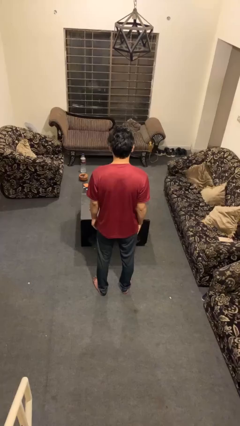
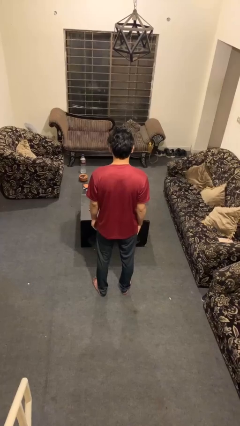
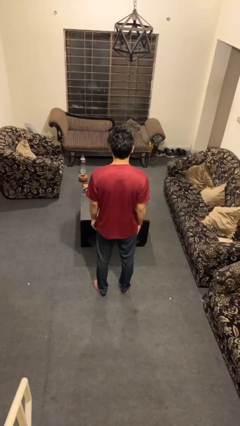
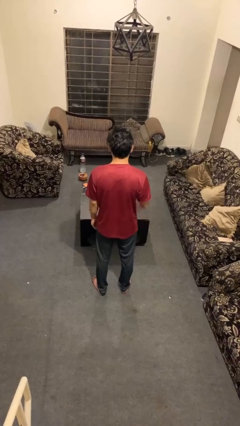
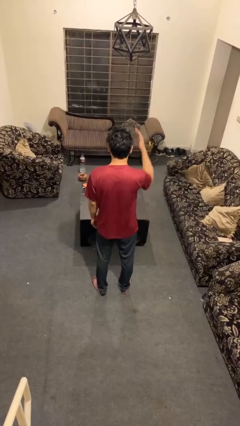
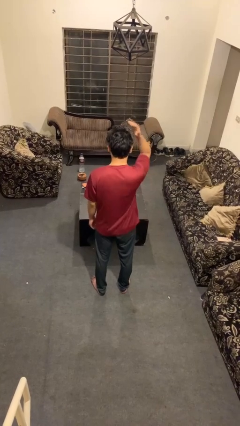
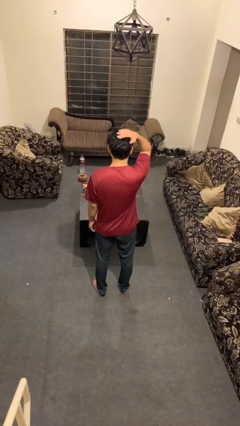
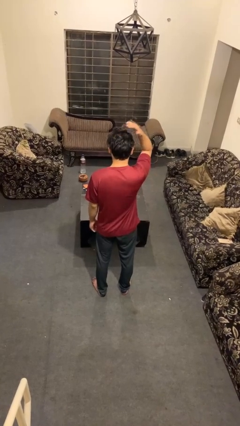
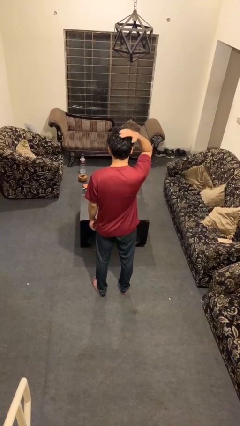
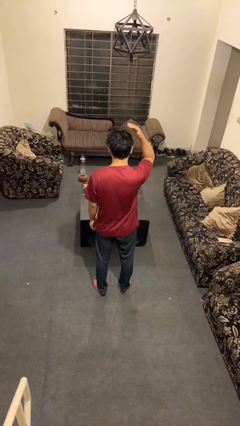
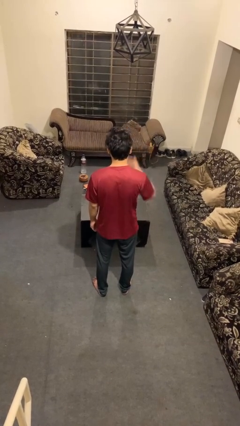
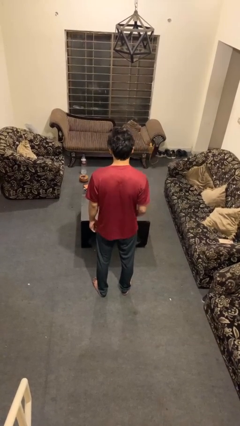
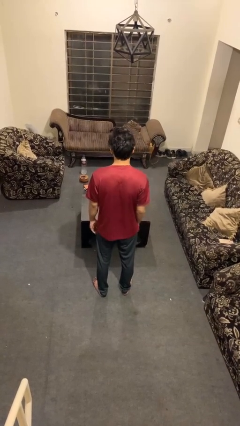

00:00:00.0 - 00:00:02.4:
person pats head

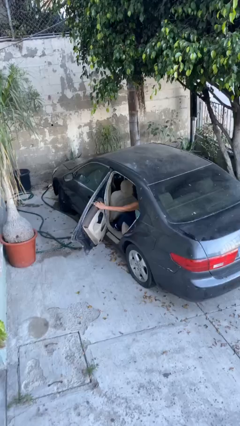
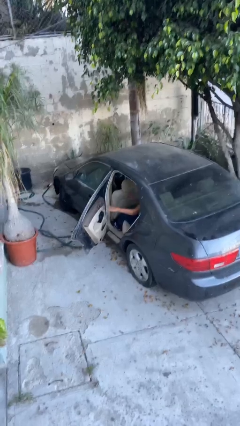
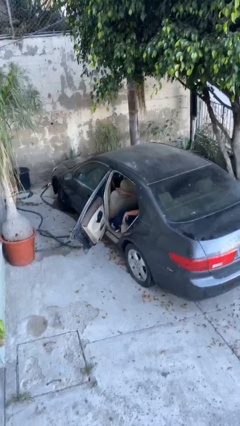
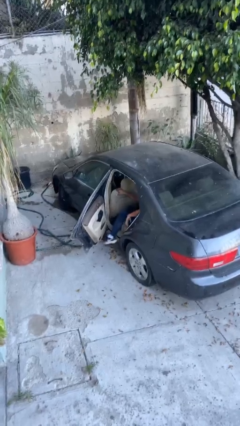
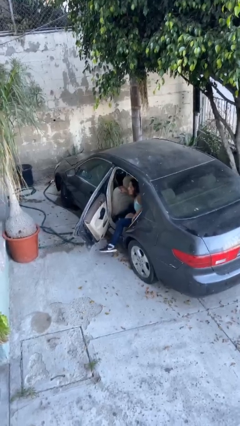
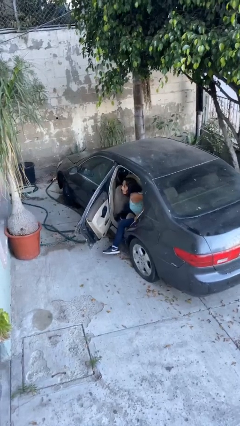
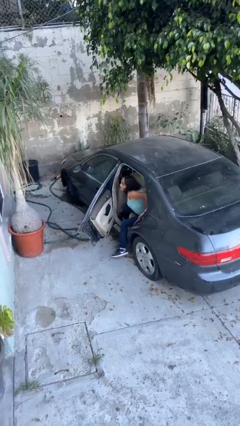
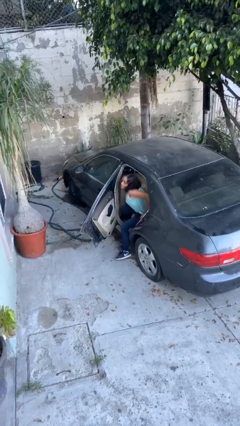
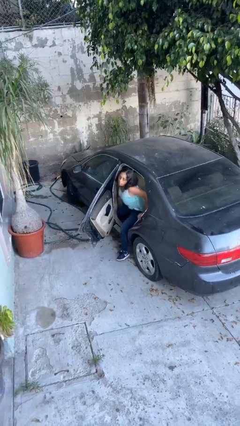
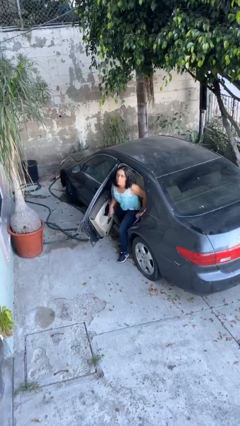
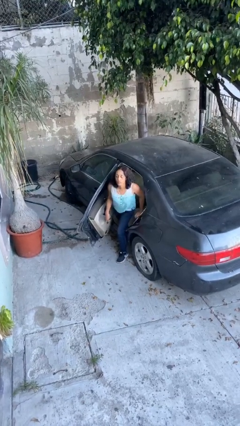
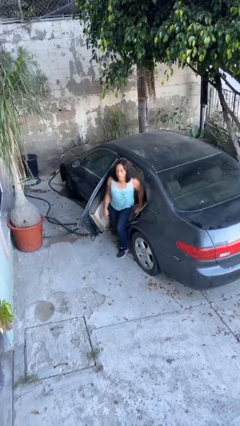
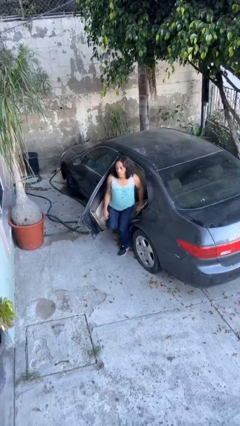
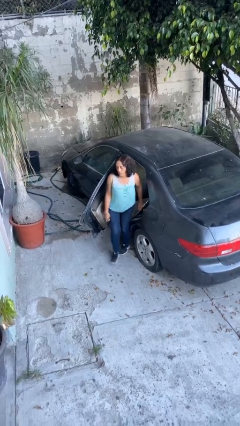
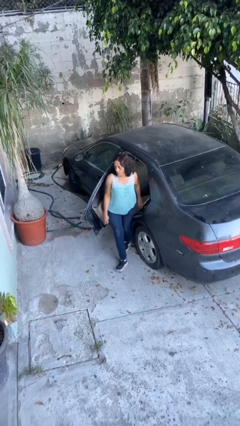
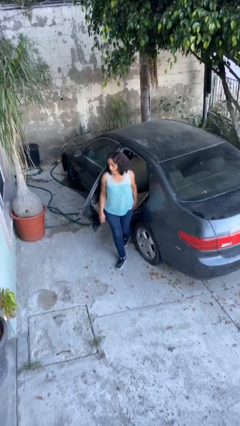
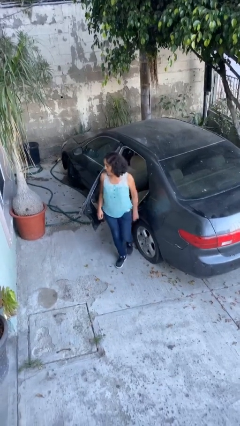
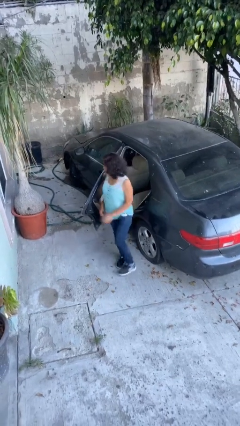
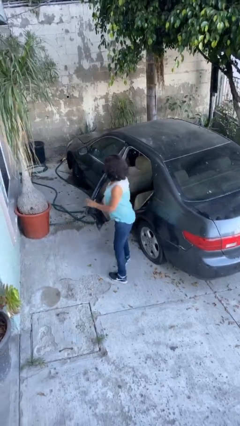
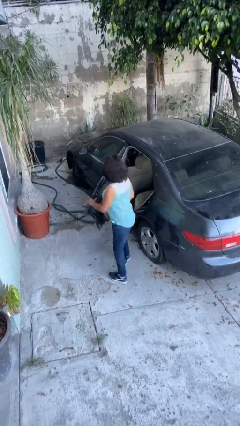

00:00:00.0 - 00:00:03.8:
person exits car

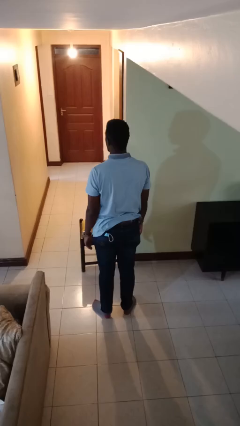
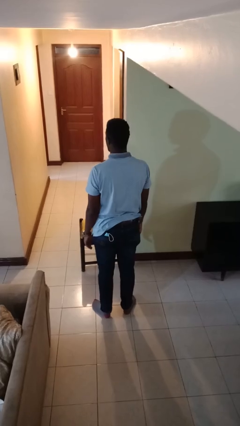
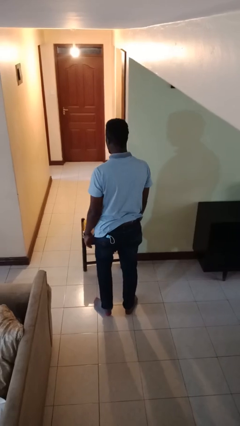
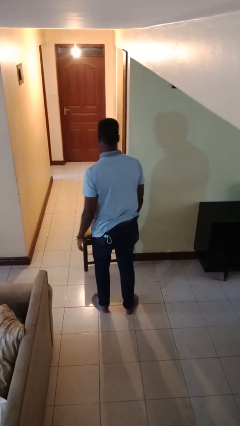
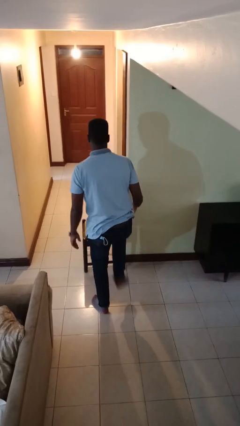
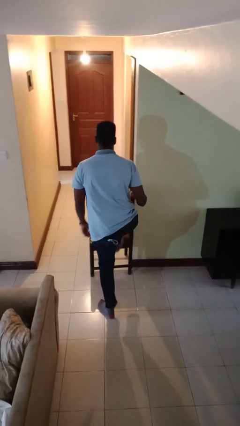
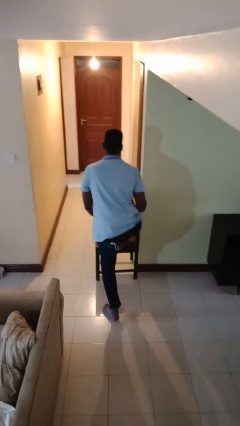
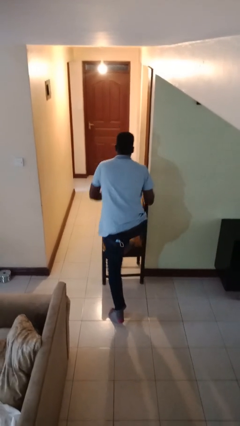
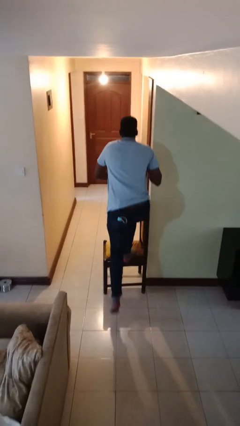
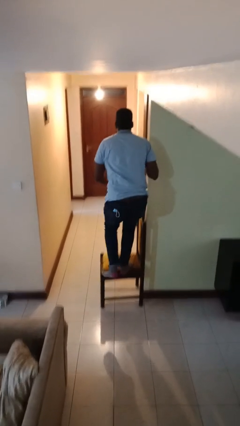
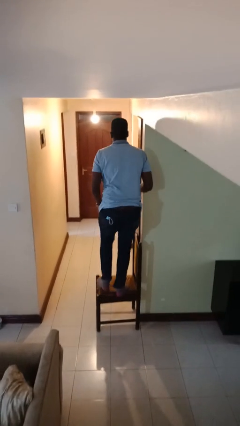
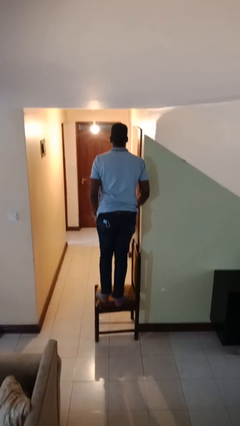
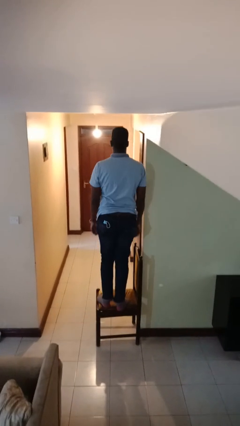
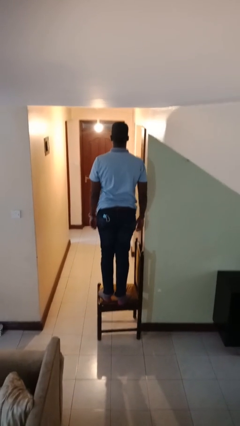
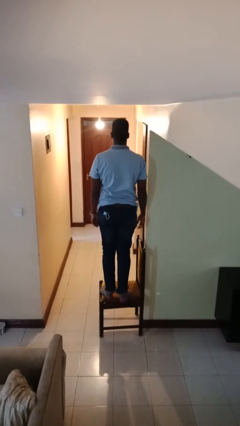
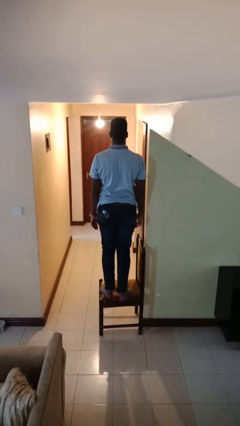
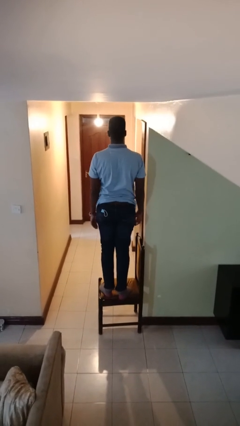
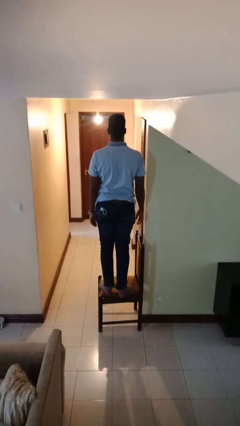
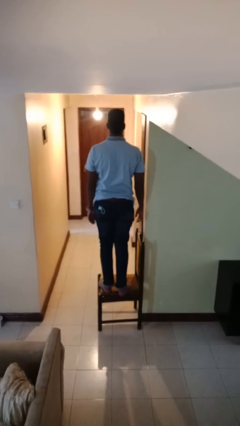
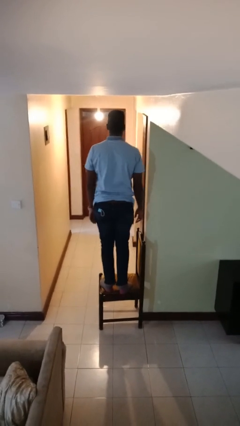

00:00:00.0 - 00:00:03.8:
person climbs on chair

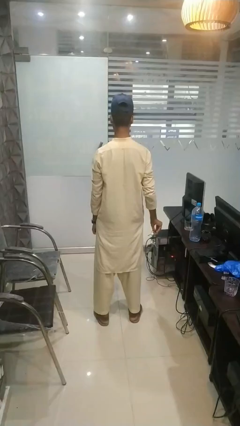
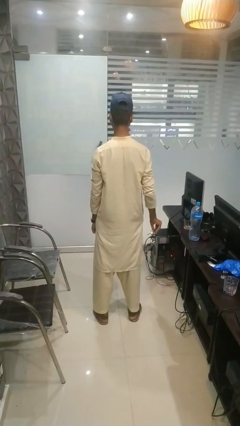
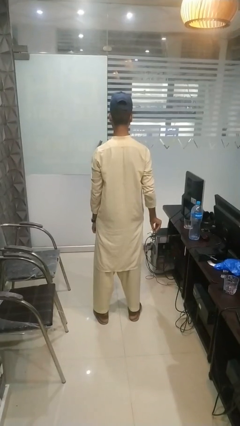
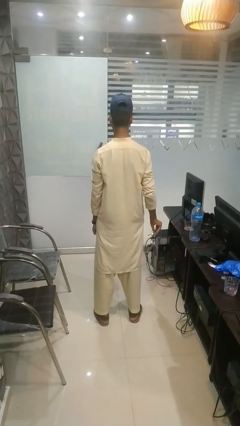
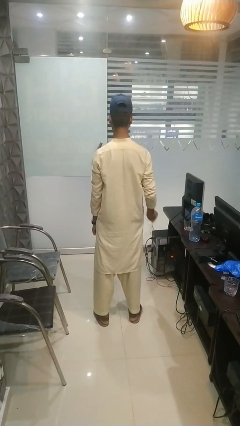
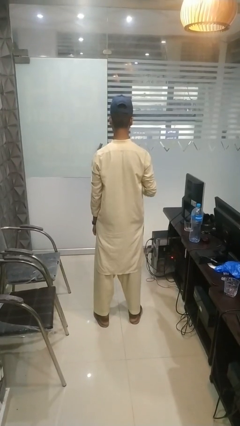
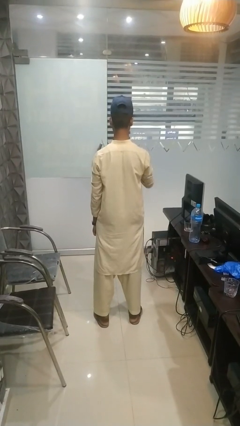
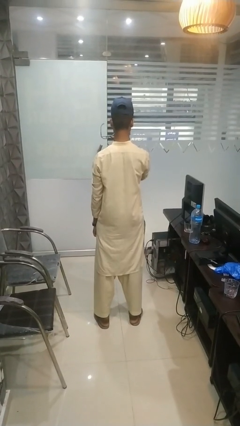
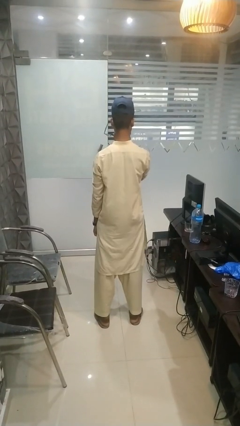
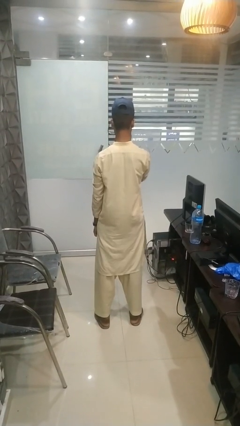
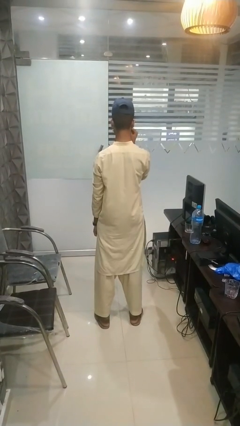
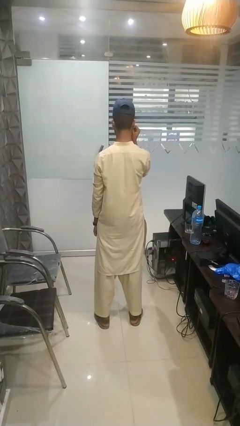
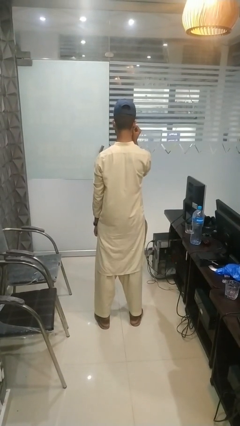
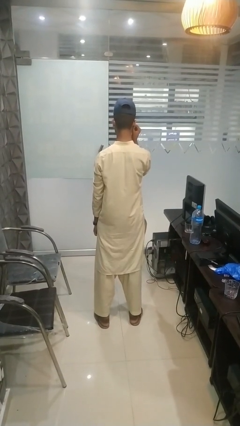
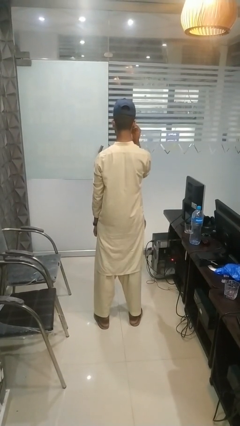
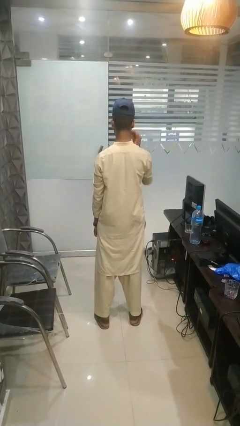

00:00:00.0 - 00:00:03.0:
person puts on glasses

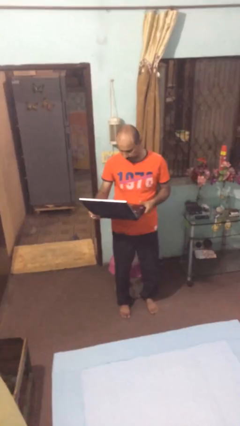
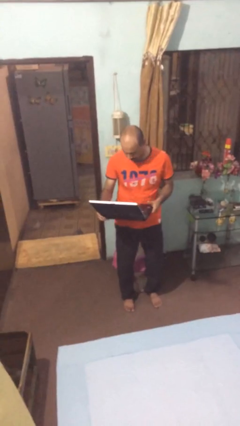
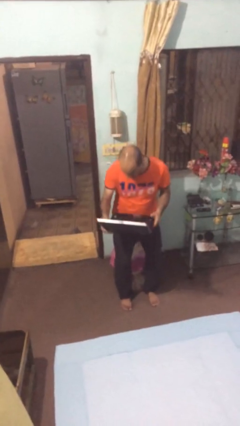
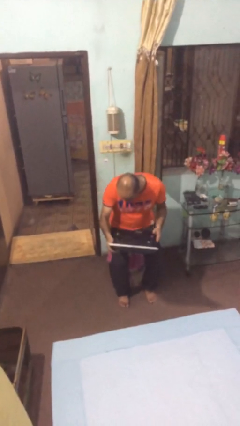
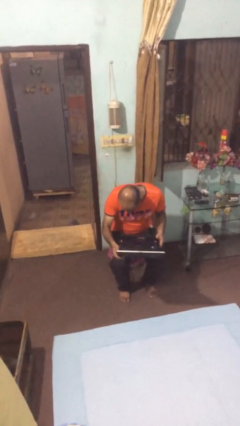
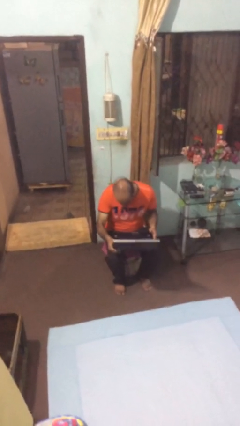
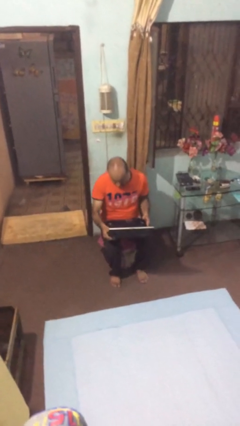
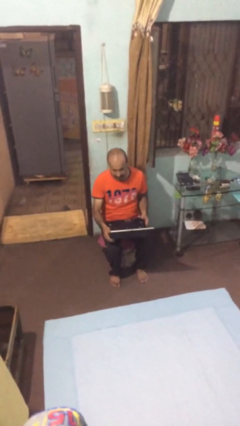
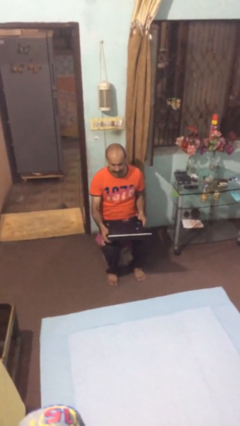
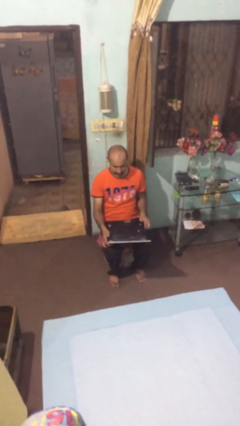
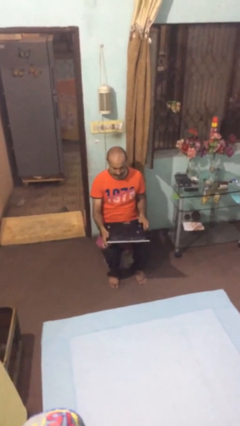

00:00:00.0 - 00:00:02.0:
person sits down

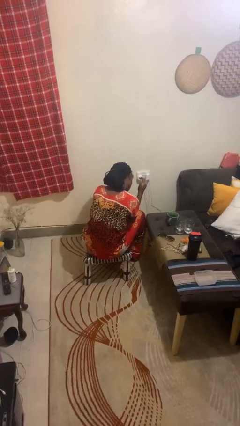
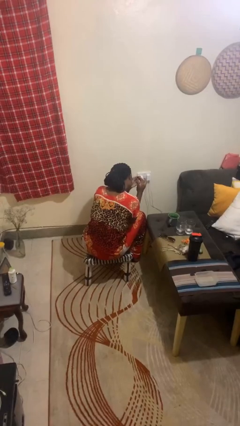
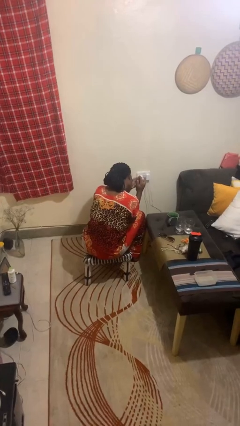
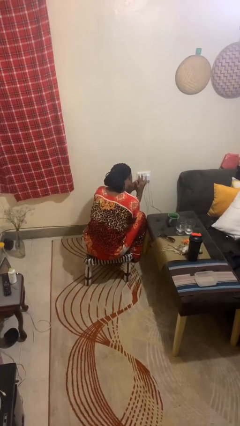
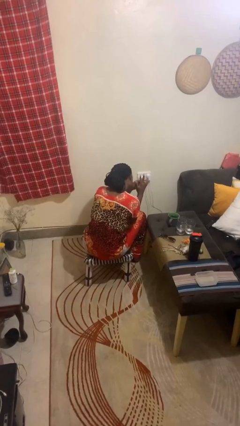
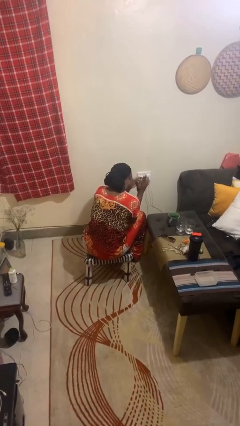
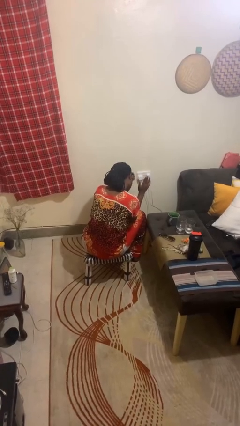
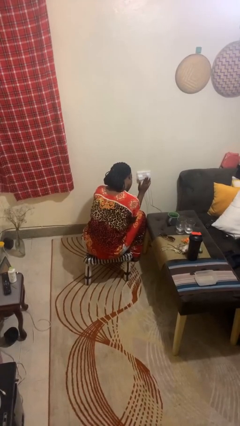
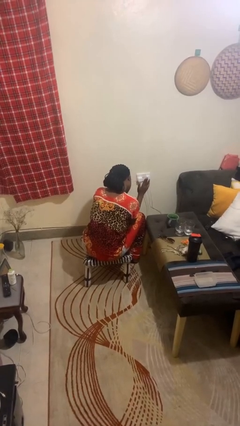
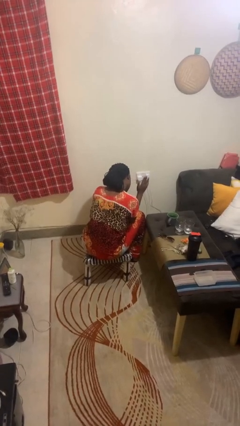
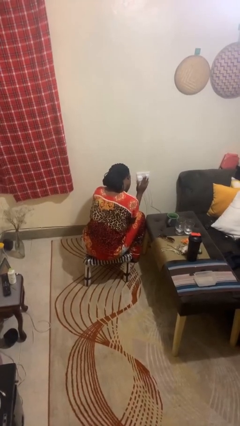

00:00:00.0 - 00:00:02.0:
person puts on ring

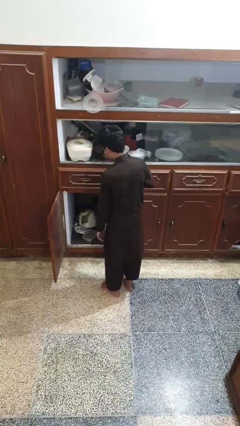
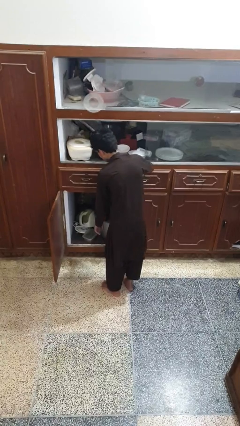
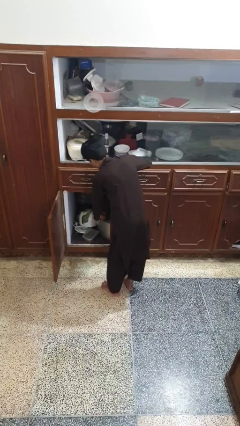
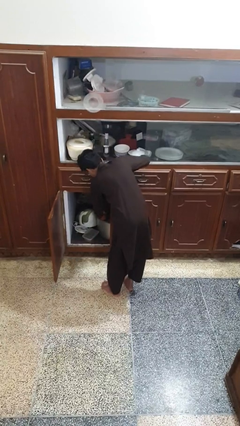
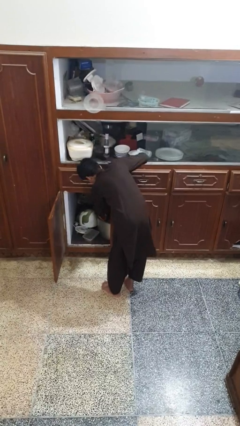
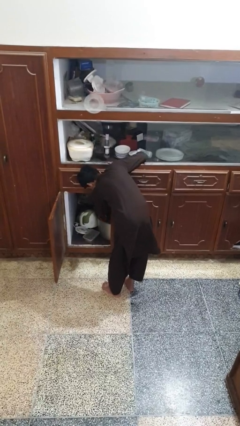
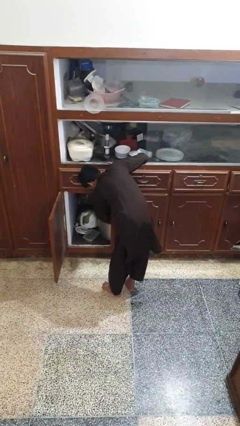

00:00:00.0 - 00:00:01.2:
person takes object from cabinet
